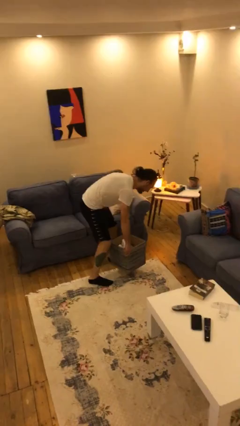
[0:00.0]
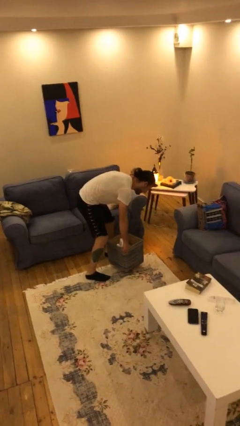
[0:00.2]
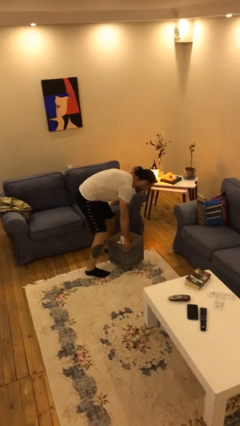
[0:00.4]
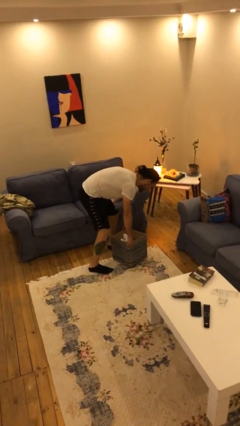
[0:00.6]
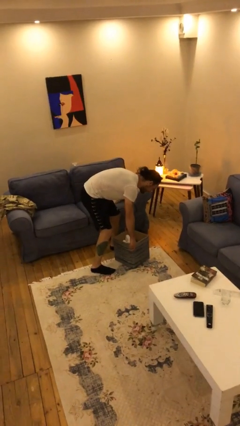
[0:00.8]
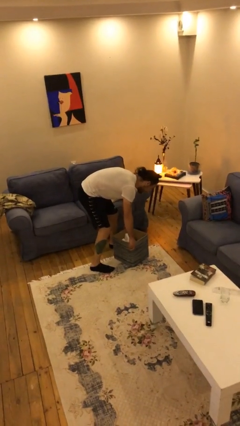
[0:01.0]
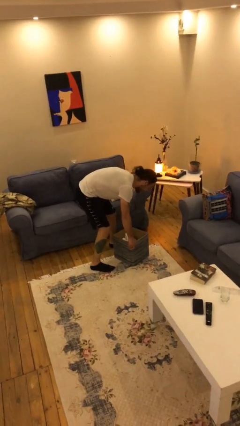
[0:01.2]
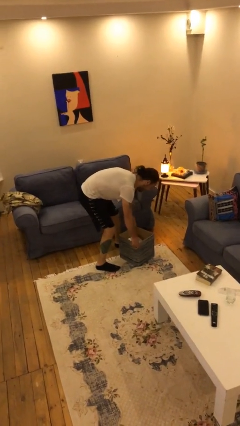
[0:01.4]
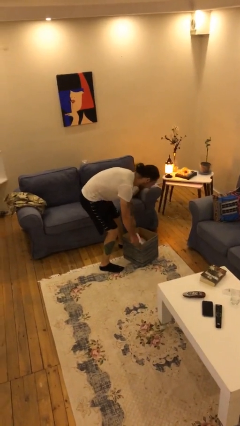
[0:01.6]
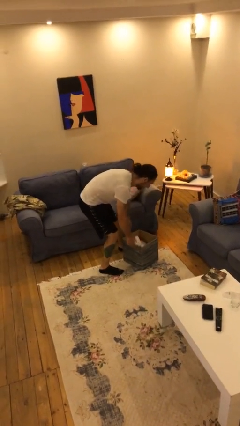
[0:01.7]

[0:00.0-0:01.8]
person puts down object on floor

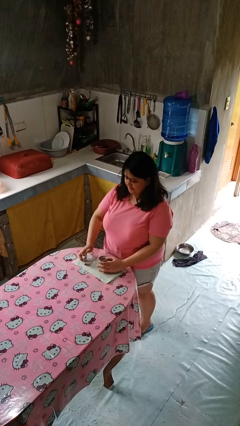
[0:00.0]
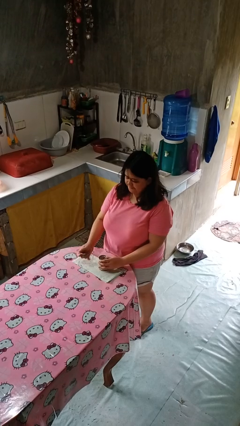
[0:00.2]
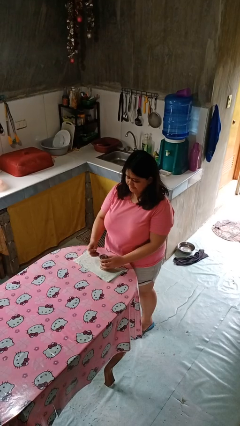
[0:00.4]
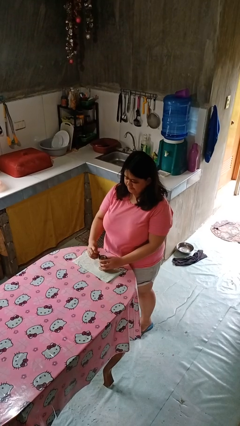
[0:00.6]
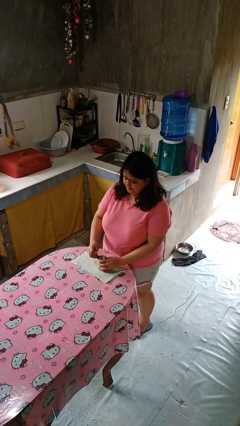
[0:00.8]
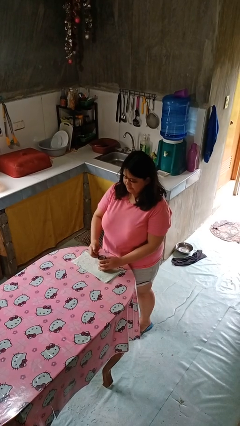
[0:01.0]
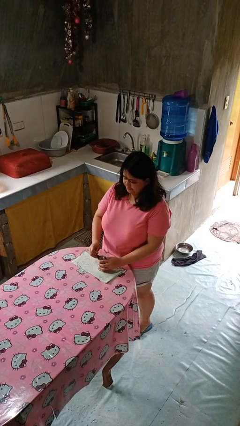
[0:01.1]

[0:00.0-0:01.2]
person opens can with can opener

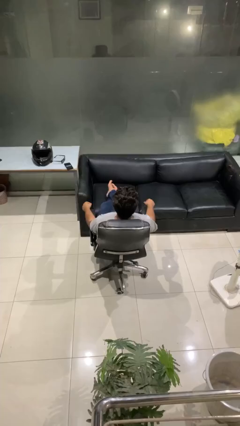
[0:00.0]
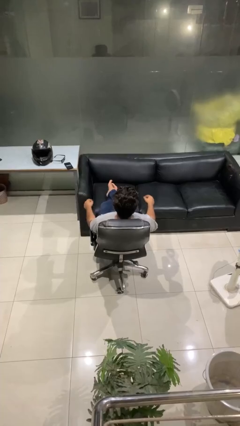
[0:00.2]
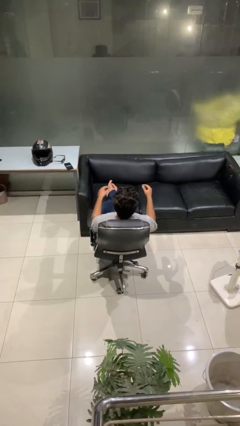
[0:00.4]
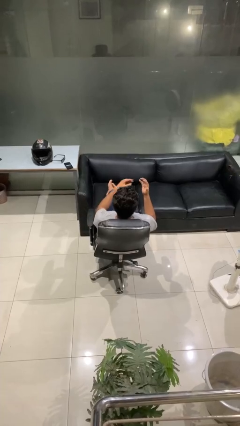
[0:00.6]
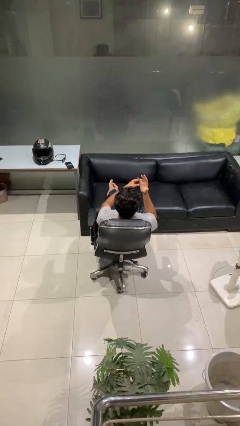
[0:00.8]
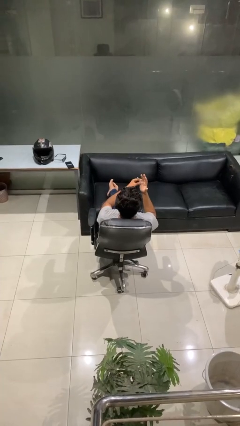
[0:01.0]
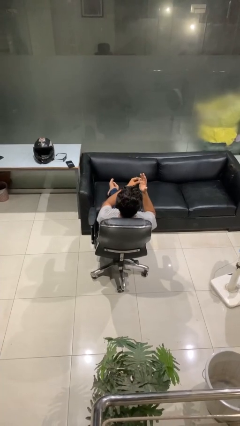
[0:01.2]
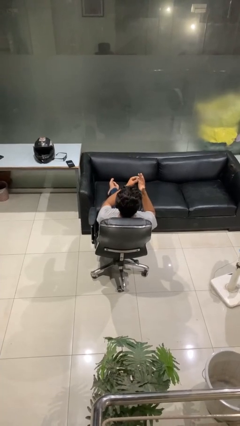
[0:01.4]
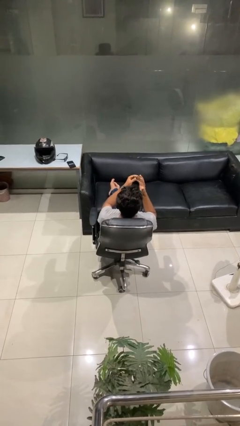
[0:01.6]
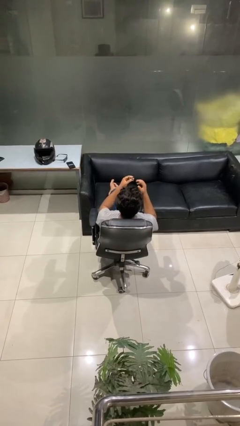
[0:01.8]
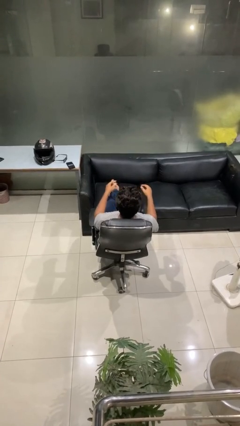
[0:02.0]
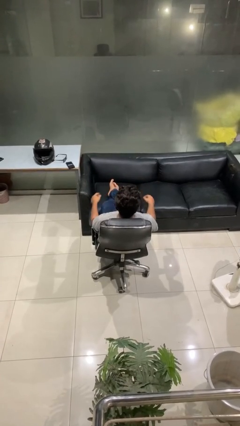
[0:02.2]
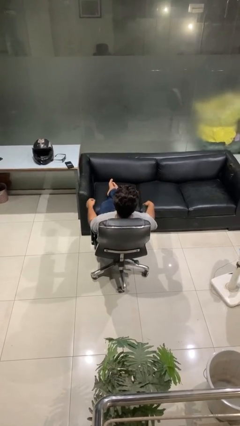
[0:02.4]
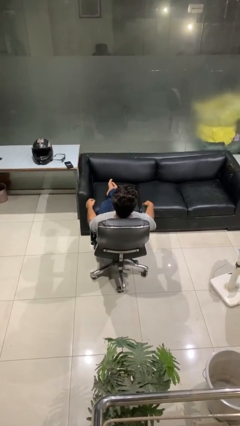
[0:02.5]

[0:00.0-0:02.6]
person takes off ring

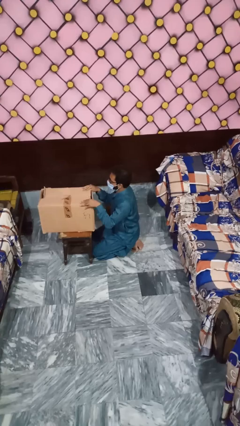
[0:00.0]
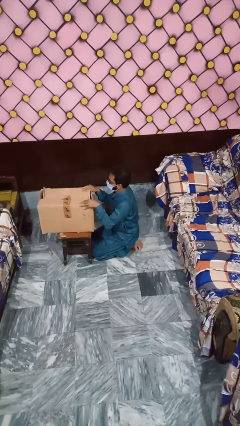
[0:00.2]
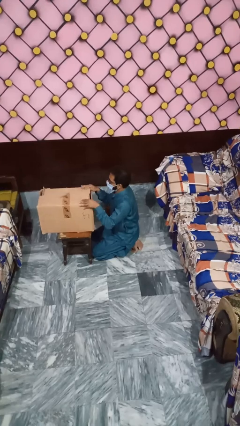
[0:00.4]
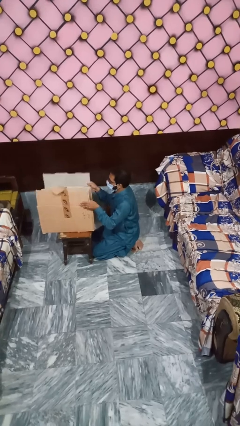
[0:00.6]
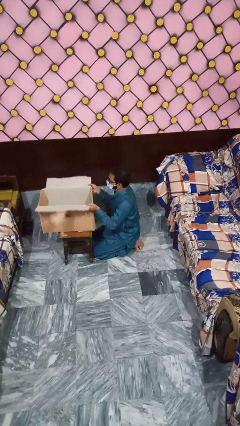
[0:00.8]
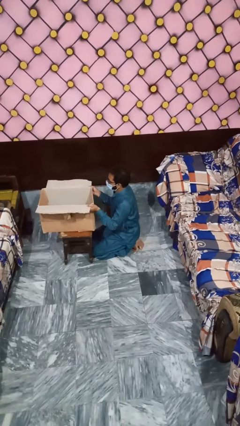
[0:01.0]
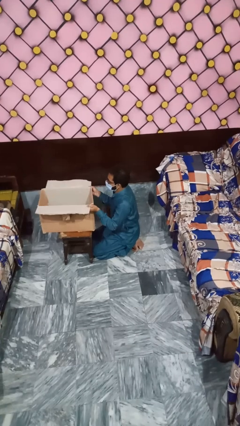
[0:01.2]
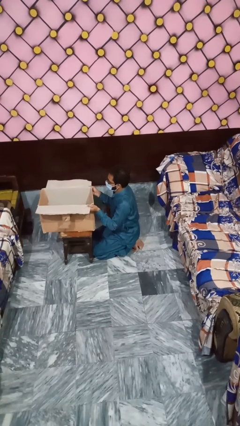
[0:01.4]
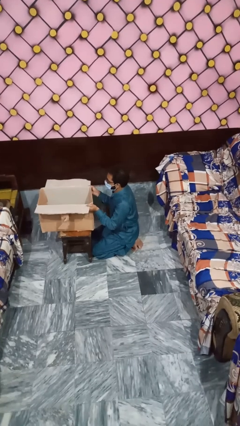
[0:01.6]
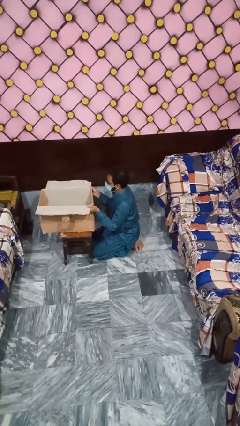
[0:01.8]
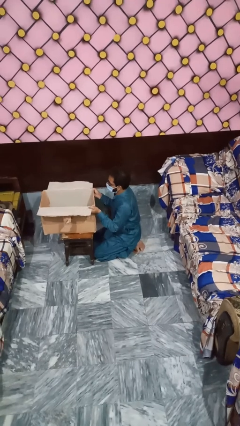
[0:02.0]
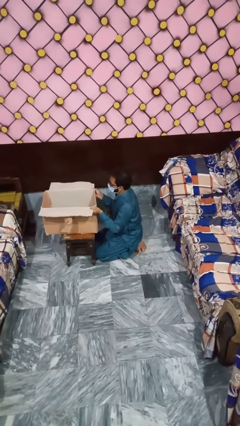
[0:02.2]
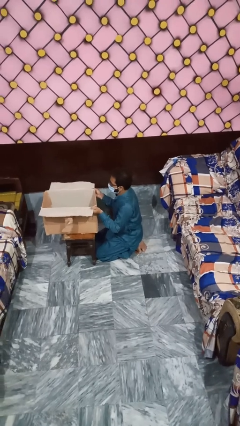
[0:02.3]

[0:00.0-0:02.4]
person opens box

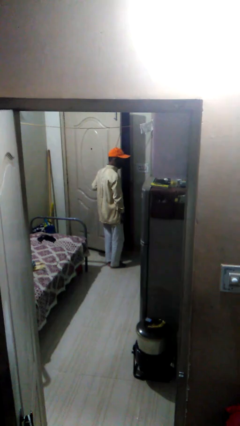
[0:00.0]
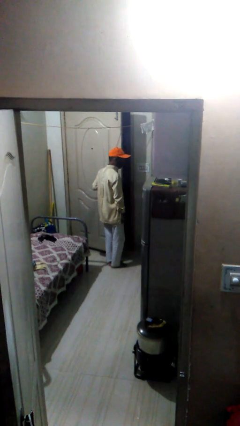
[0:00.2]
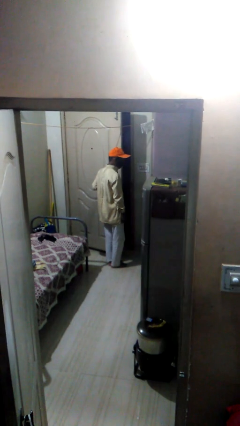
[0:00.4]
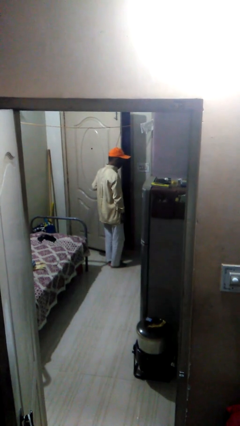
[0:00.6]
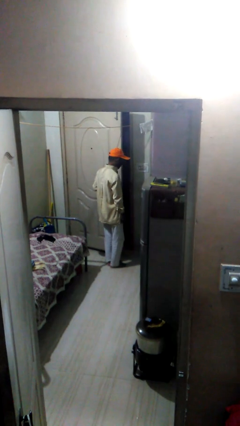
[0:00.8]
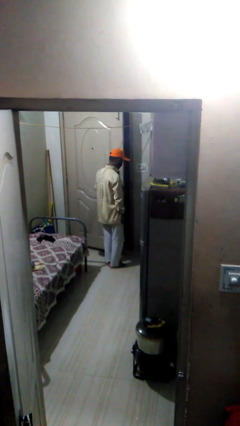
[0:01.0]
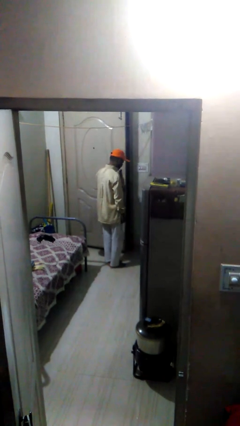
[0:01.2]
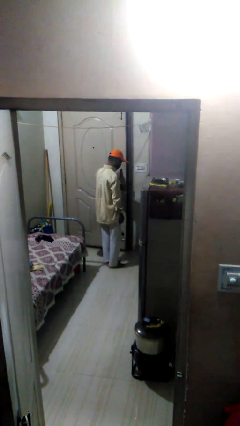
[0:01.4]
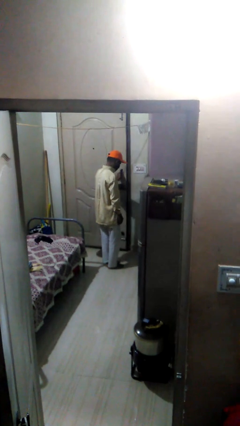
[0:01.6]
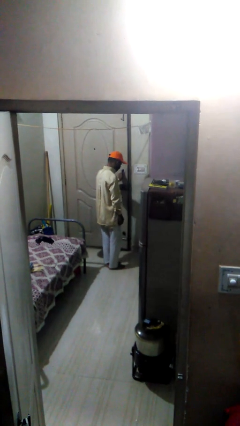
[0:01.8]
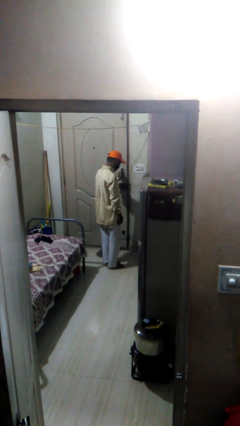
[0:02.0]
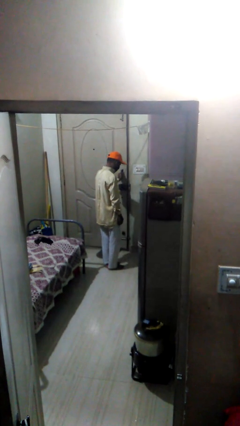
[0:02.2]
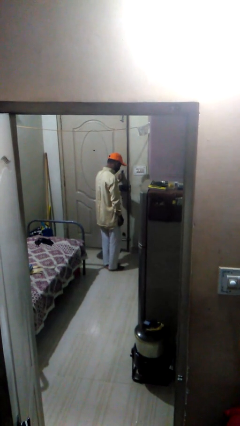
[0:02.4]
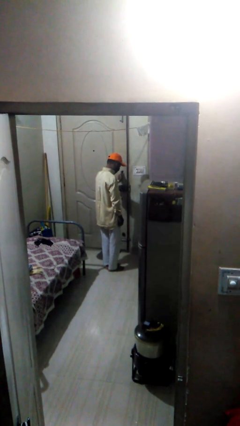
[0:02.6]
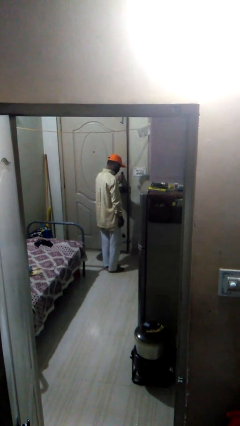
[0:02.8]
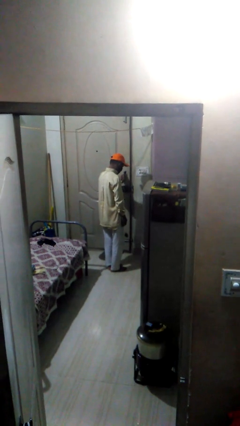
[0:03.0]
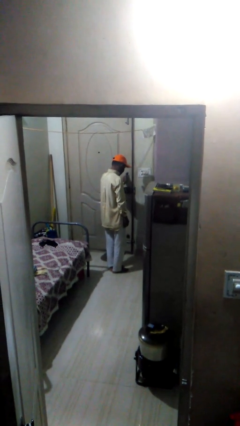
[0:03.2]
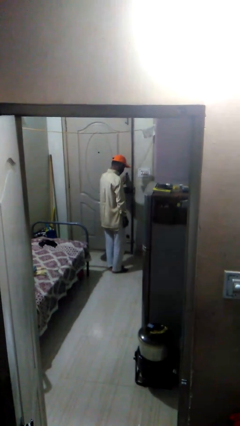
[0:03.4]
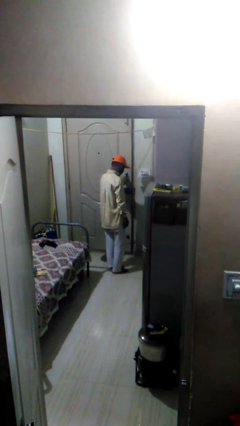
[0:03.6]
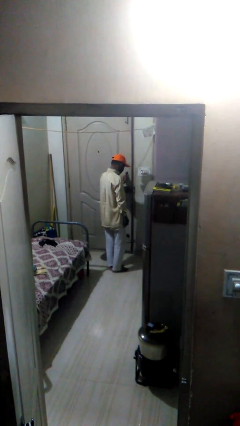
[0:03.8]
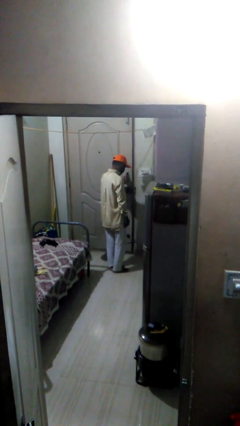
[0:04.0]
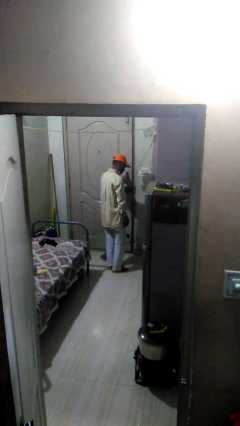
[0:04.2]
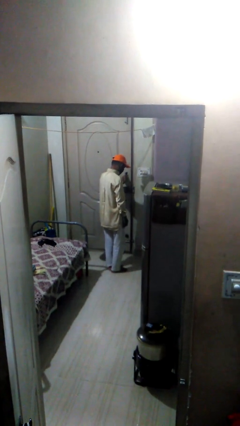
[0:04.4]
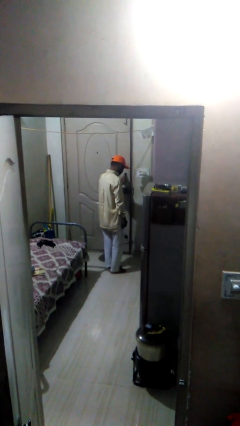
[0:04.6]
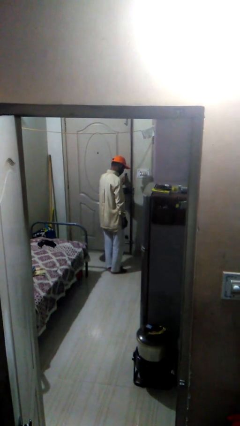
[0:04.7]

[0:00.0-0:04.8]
person closes facility door

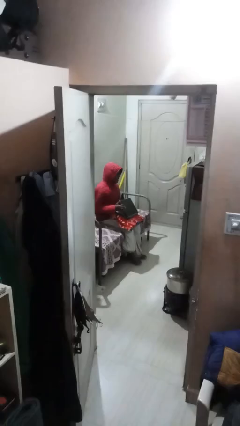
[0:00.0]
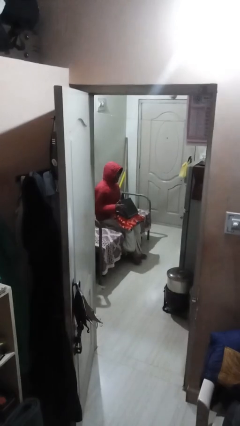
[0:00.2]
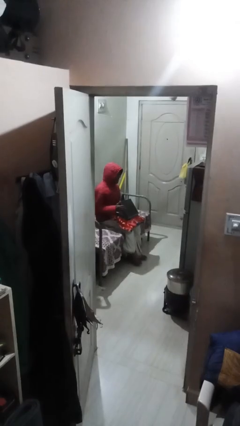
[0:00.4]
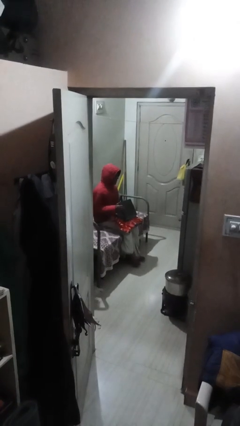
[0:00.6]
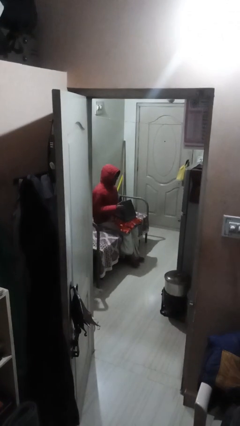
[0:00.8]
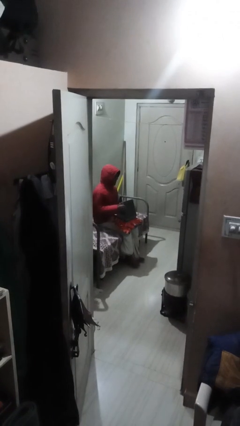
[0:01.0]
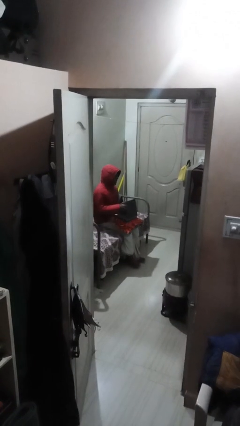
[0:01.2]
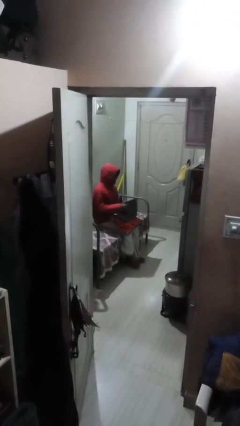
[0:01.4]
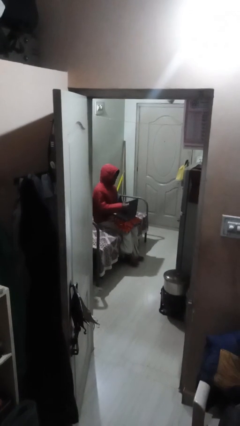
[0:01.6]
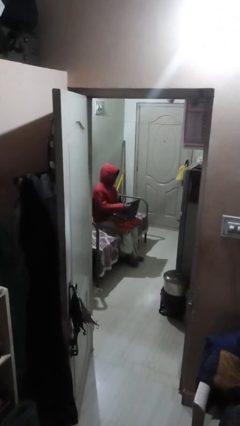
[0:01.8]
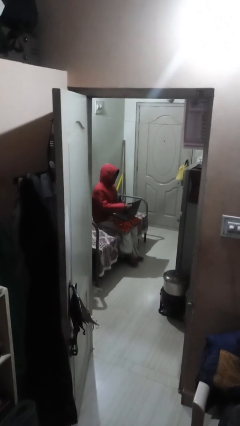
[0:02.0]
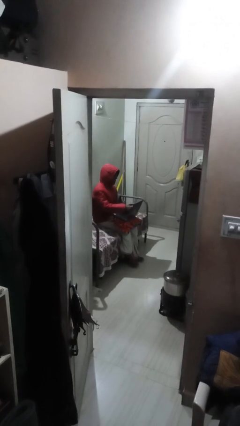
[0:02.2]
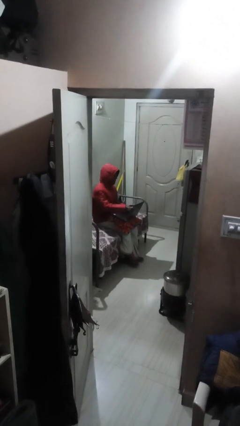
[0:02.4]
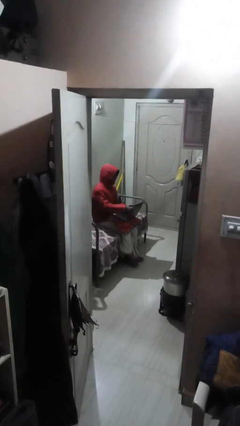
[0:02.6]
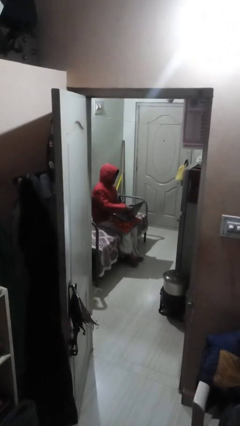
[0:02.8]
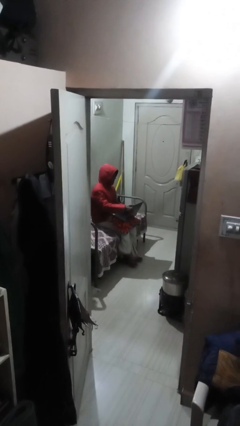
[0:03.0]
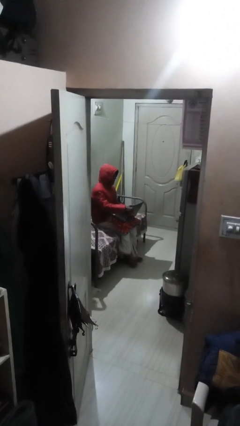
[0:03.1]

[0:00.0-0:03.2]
person interacts with laptop

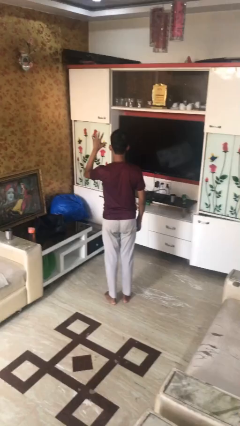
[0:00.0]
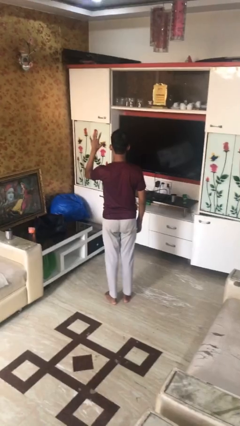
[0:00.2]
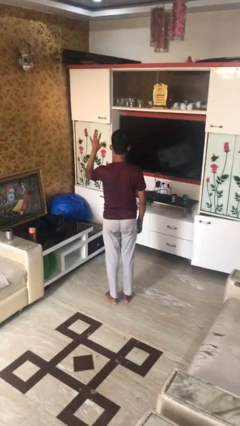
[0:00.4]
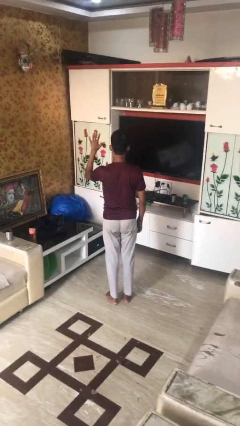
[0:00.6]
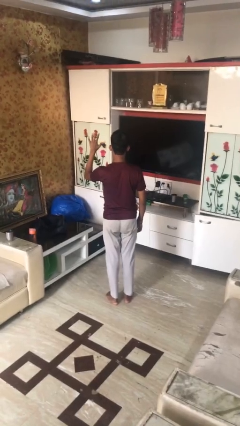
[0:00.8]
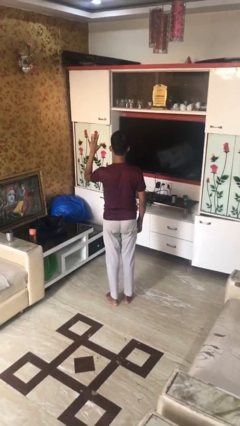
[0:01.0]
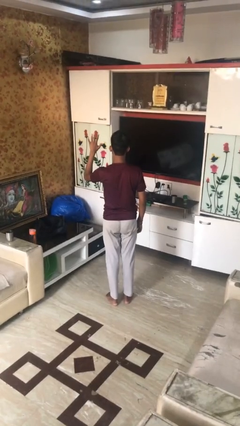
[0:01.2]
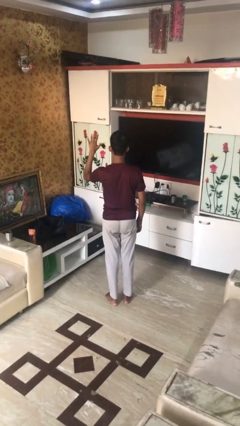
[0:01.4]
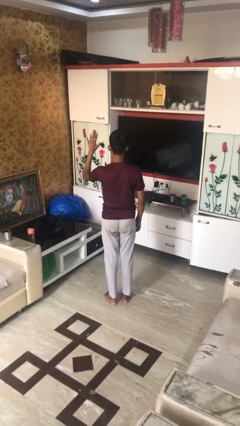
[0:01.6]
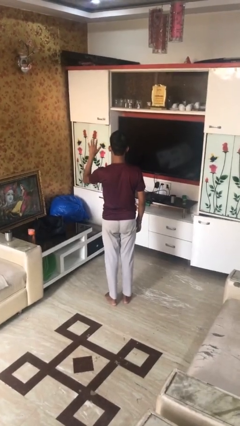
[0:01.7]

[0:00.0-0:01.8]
person gestures number five
